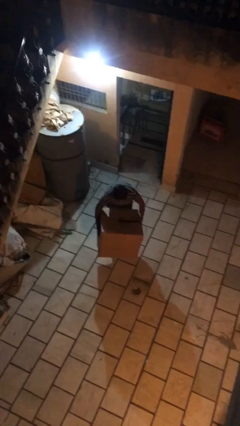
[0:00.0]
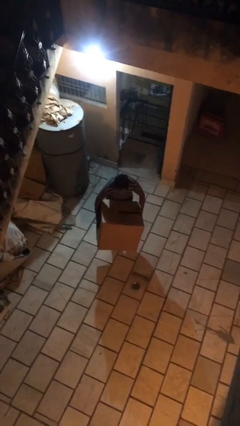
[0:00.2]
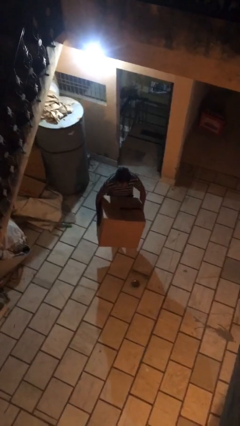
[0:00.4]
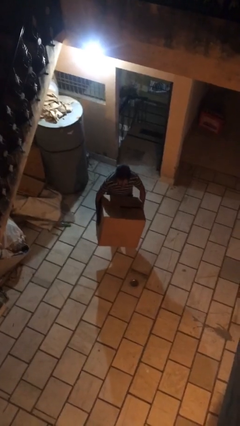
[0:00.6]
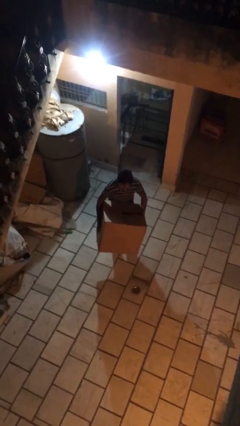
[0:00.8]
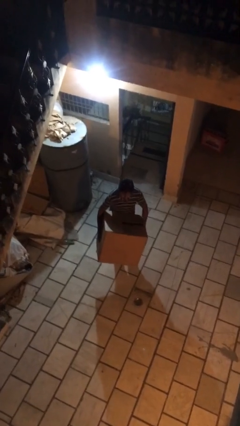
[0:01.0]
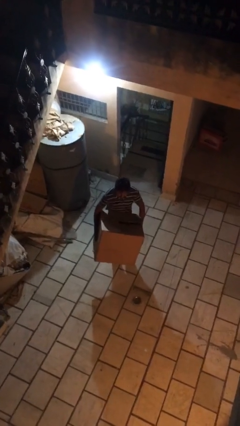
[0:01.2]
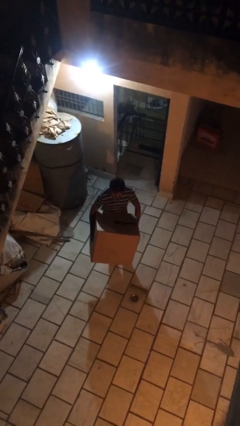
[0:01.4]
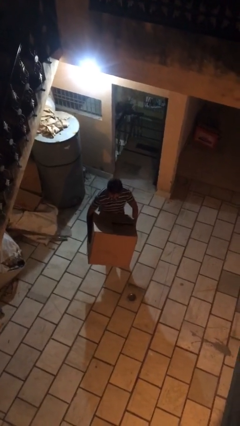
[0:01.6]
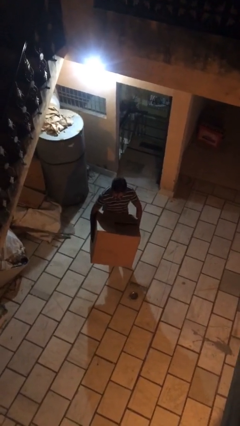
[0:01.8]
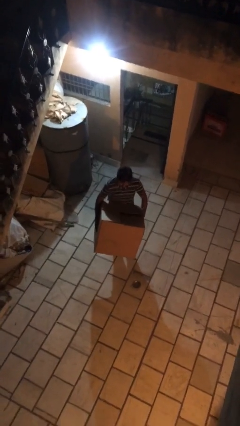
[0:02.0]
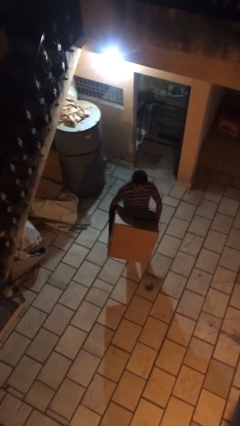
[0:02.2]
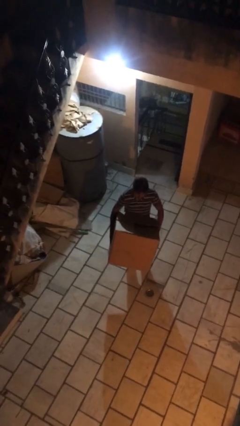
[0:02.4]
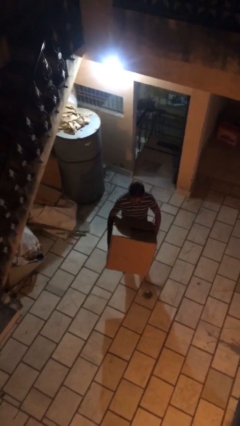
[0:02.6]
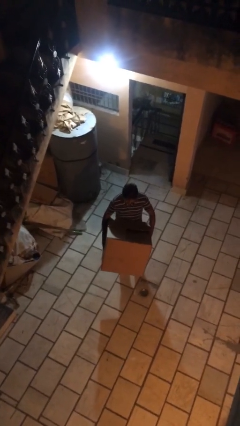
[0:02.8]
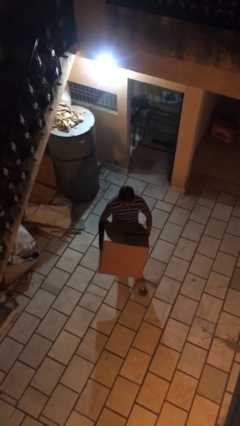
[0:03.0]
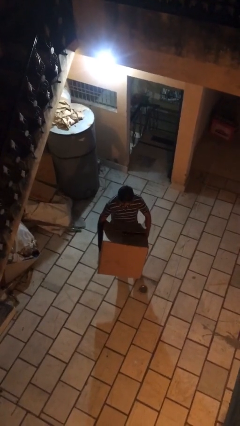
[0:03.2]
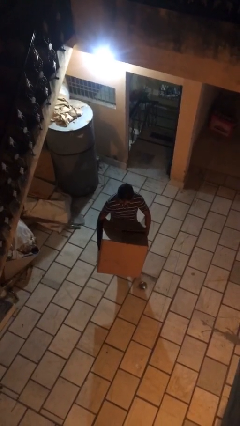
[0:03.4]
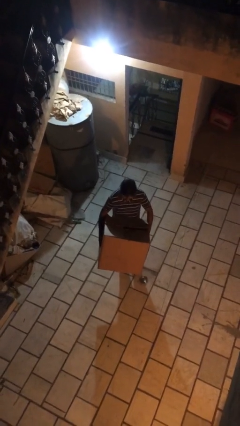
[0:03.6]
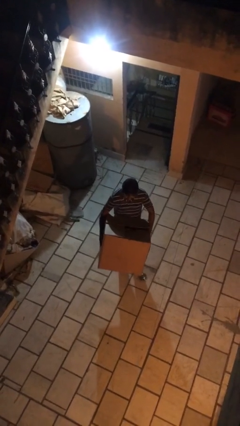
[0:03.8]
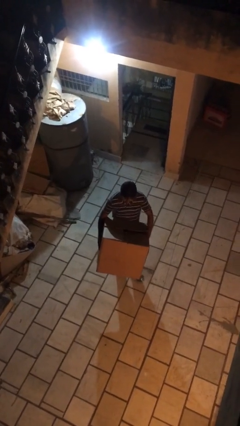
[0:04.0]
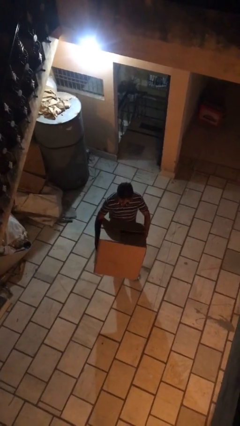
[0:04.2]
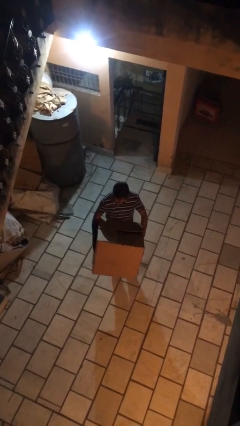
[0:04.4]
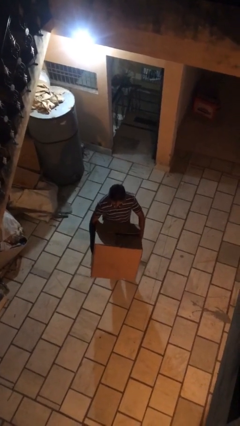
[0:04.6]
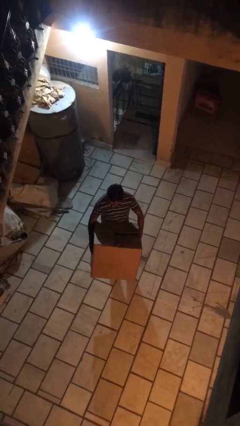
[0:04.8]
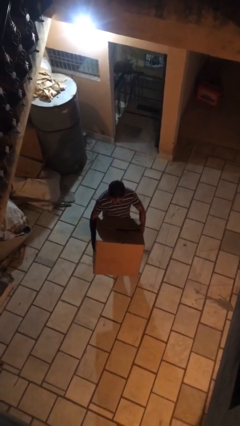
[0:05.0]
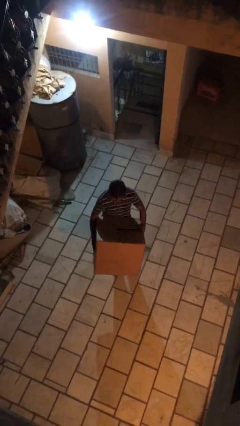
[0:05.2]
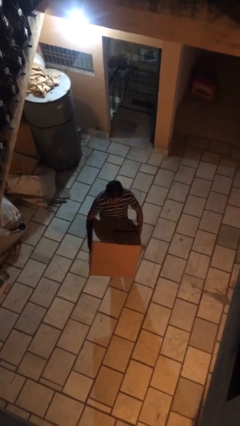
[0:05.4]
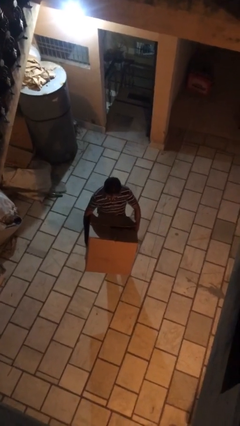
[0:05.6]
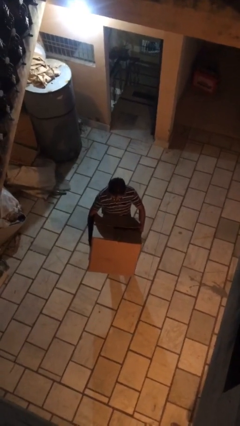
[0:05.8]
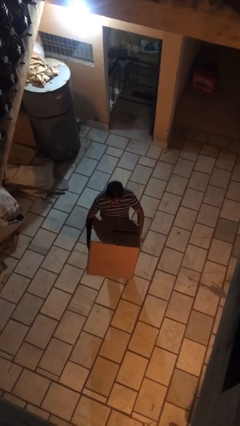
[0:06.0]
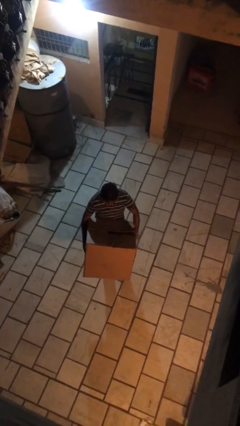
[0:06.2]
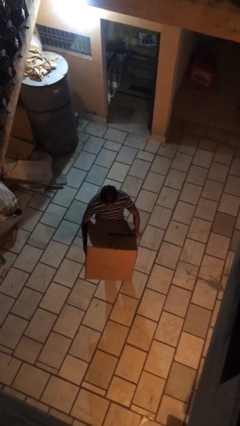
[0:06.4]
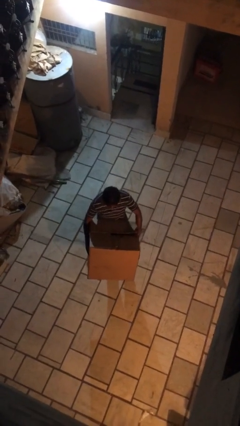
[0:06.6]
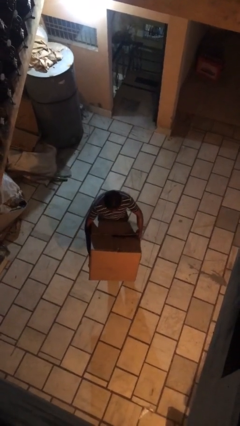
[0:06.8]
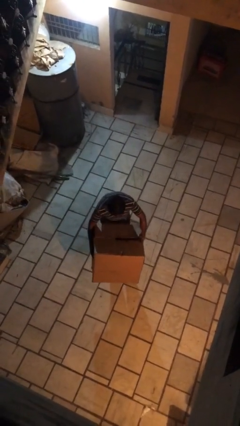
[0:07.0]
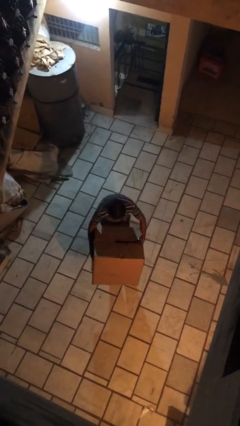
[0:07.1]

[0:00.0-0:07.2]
person carries heavy object

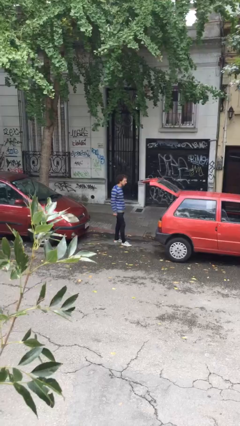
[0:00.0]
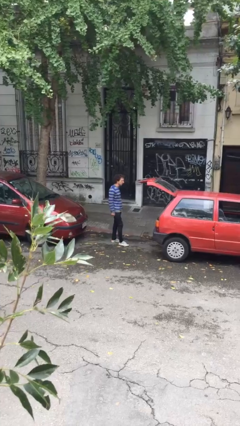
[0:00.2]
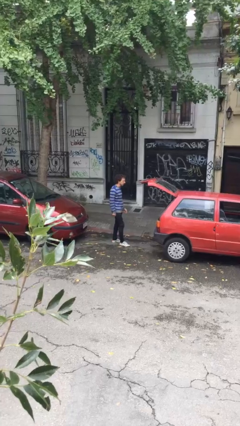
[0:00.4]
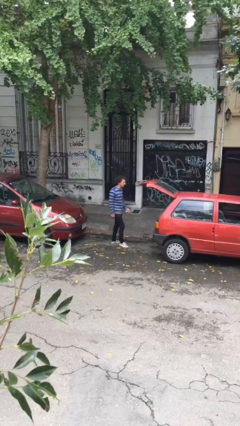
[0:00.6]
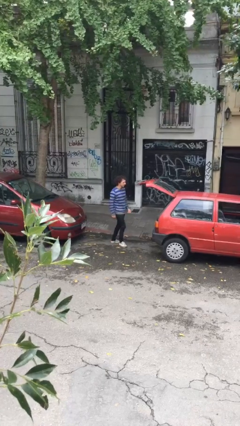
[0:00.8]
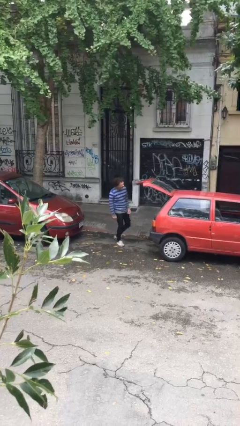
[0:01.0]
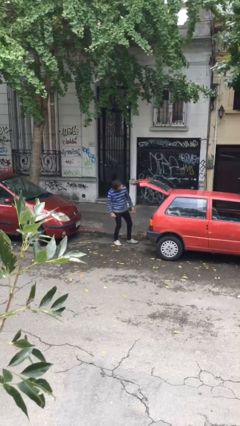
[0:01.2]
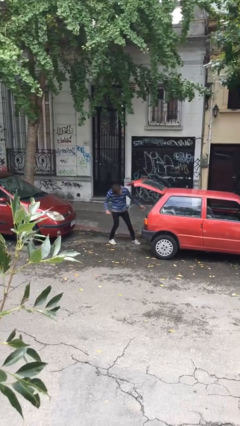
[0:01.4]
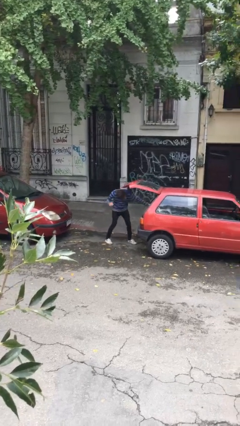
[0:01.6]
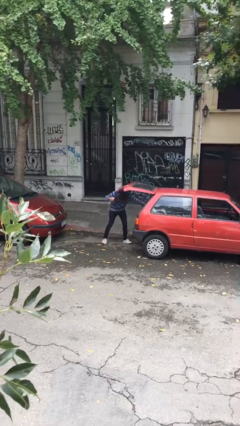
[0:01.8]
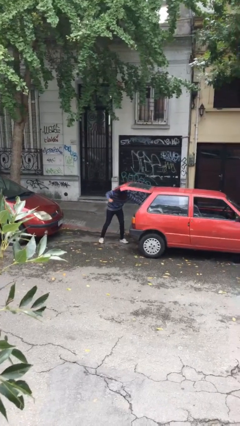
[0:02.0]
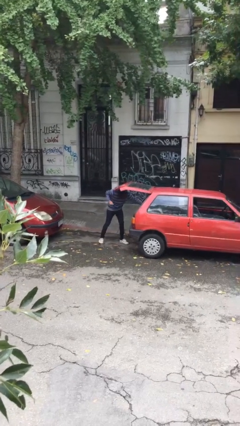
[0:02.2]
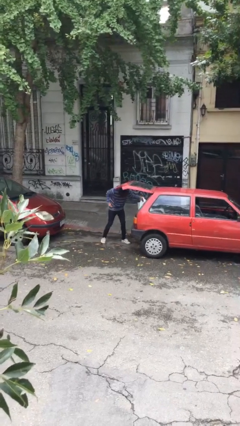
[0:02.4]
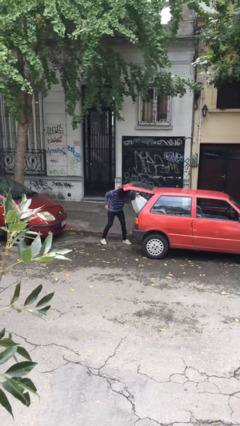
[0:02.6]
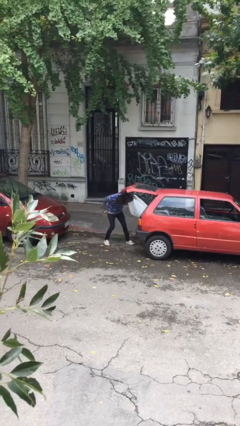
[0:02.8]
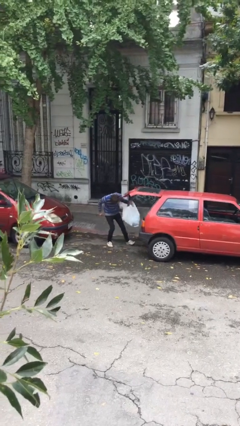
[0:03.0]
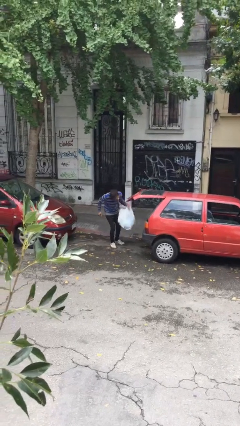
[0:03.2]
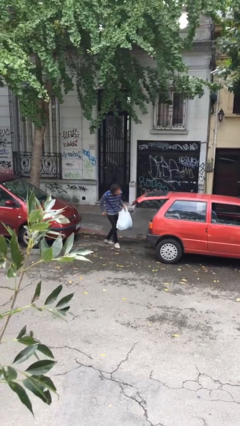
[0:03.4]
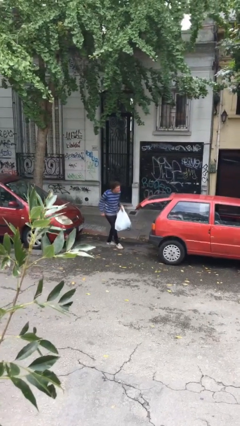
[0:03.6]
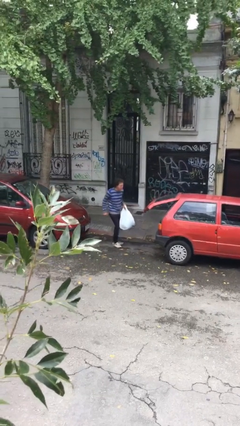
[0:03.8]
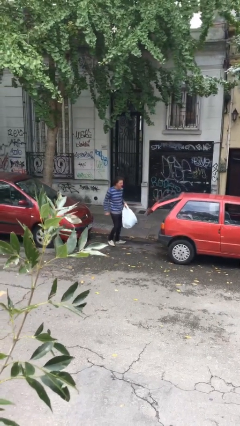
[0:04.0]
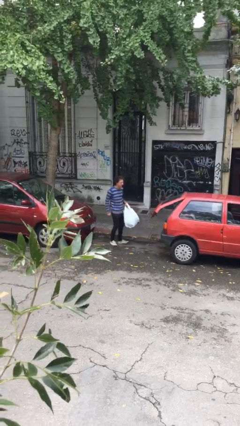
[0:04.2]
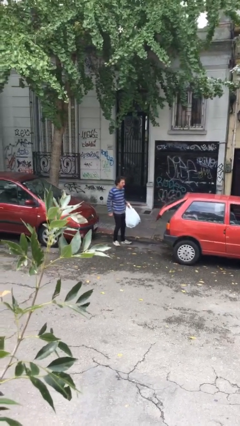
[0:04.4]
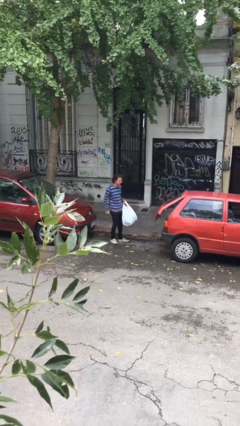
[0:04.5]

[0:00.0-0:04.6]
person unloads car

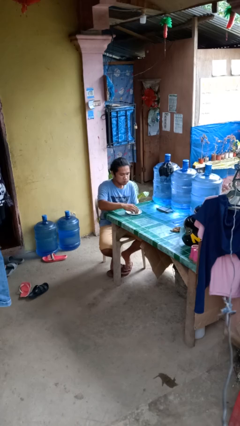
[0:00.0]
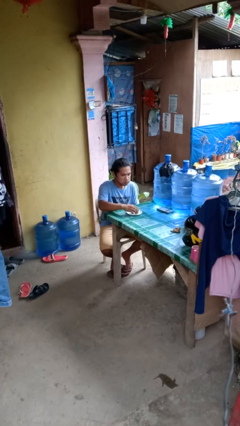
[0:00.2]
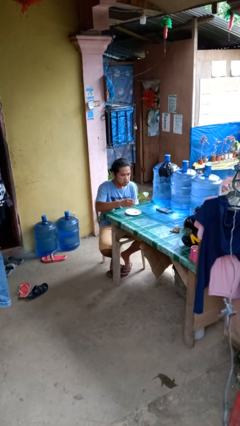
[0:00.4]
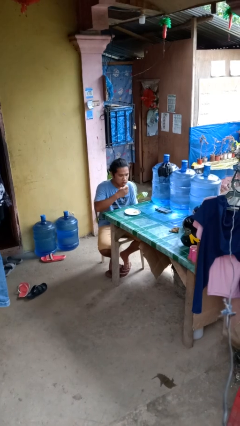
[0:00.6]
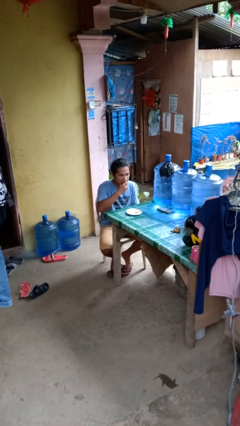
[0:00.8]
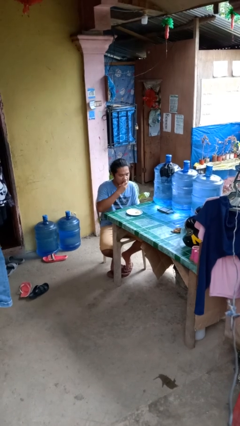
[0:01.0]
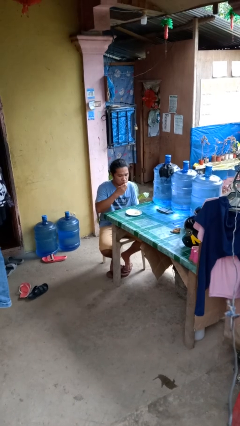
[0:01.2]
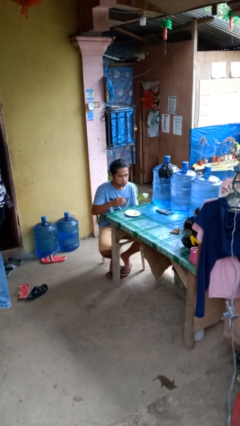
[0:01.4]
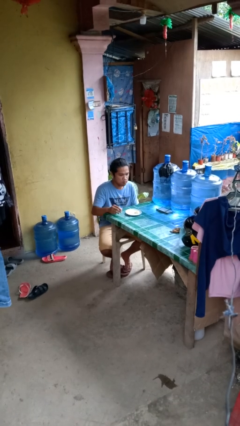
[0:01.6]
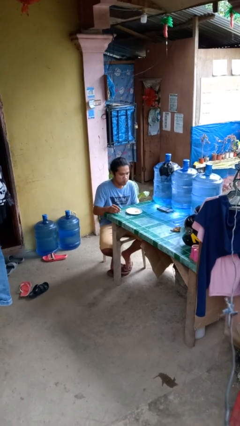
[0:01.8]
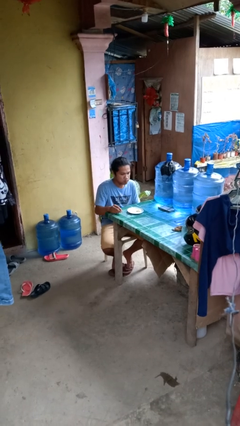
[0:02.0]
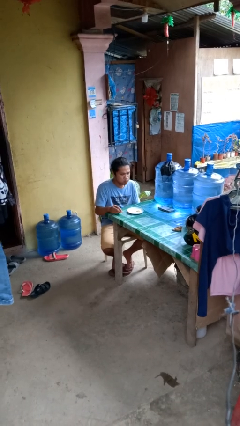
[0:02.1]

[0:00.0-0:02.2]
person eats with hands

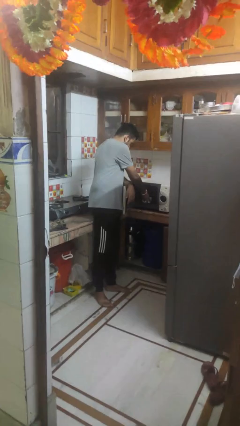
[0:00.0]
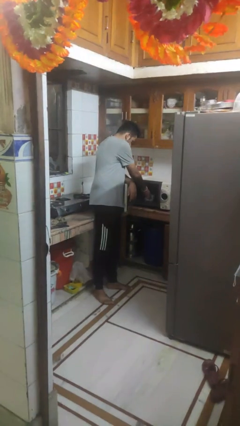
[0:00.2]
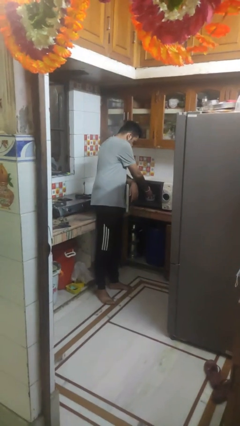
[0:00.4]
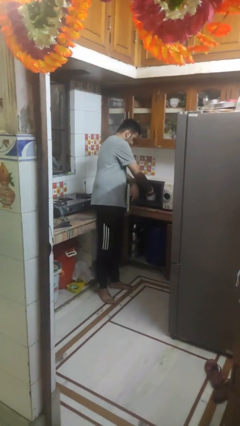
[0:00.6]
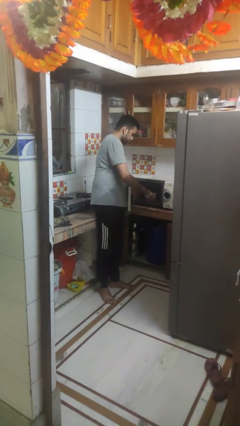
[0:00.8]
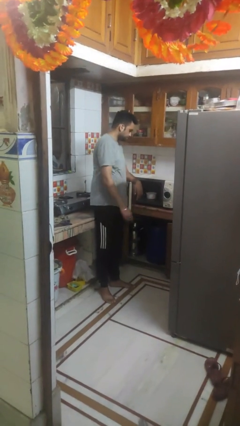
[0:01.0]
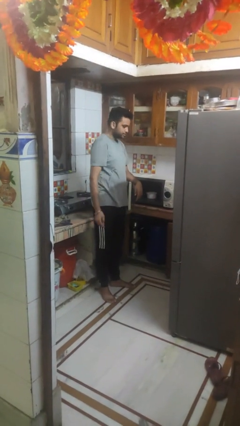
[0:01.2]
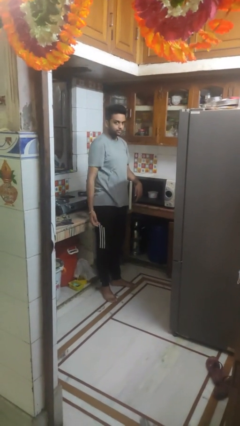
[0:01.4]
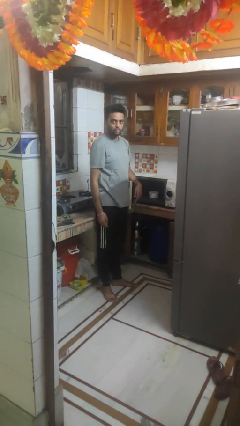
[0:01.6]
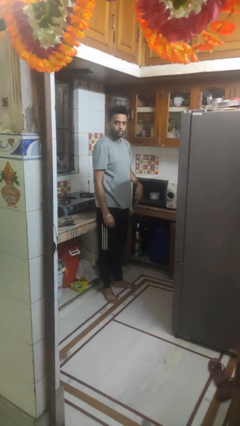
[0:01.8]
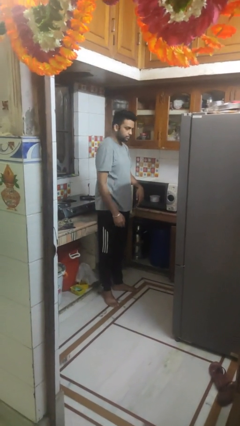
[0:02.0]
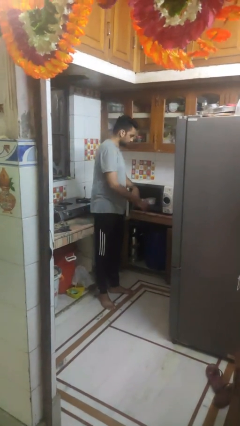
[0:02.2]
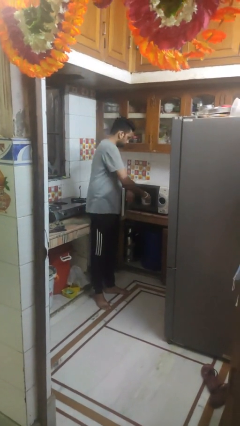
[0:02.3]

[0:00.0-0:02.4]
person puts object into microwave

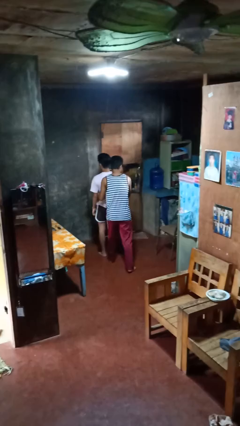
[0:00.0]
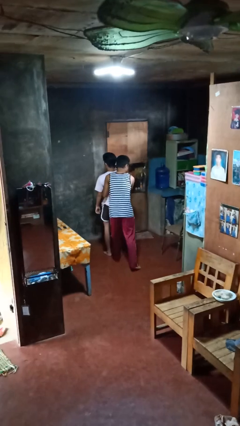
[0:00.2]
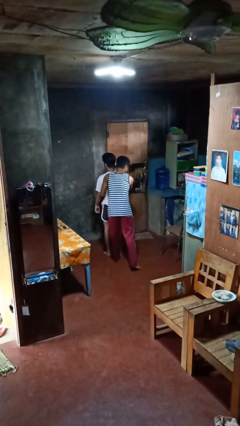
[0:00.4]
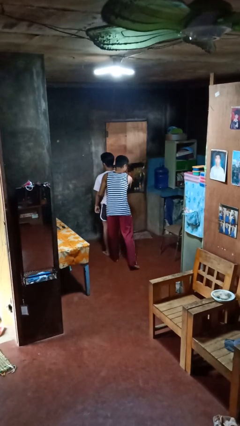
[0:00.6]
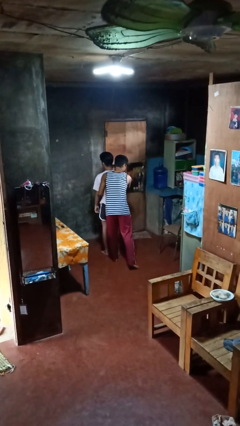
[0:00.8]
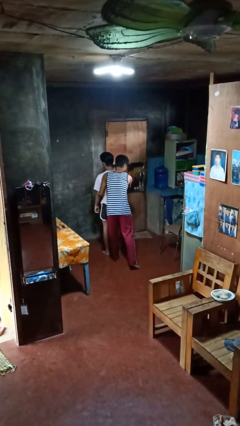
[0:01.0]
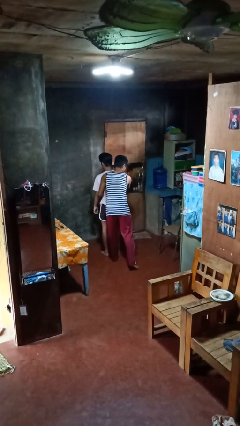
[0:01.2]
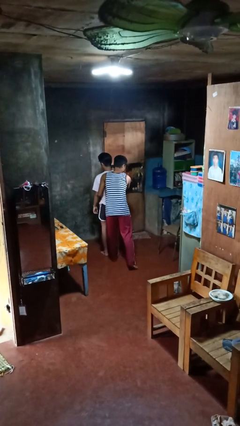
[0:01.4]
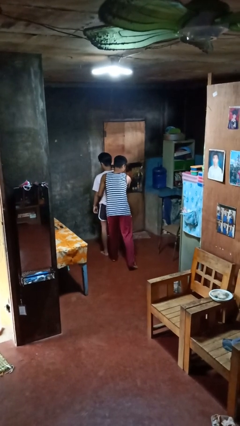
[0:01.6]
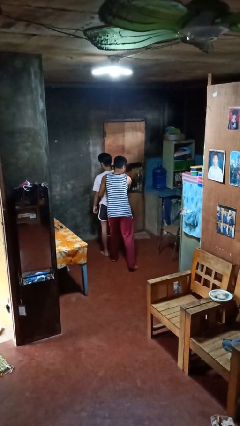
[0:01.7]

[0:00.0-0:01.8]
person hugs person from behind
